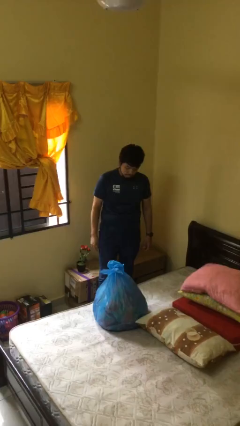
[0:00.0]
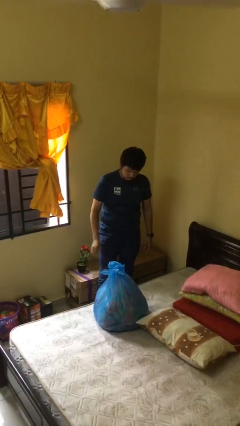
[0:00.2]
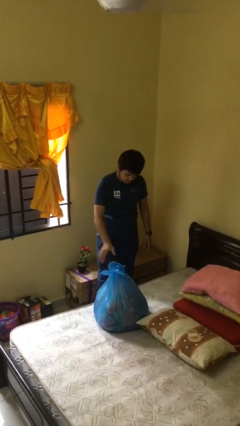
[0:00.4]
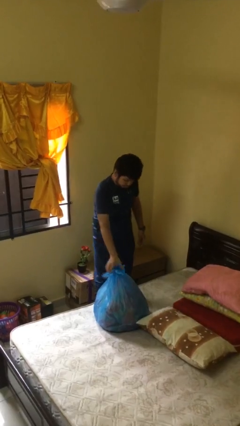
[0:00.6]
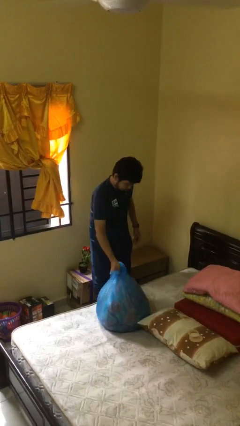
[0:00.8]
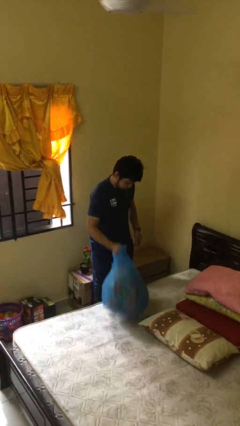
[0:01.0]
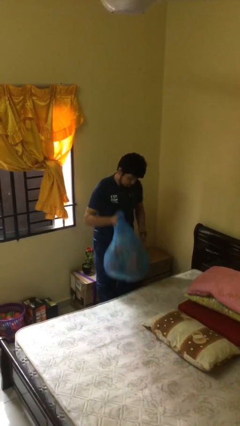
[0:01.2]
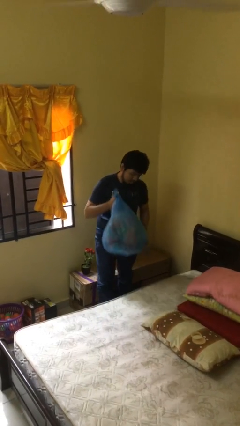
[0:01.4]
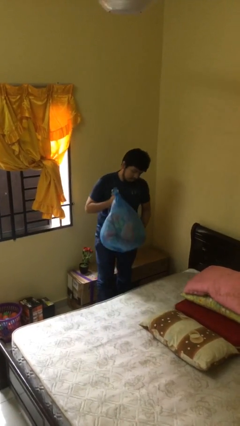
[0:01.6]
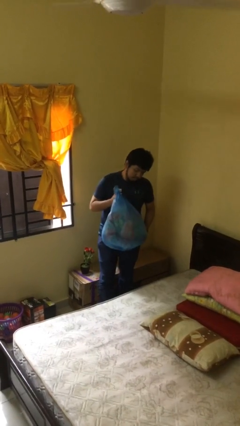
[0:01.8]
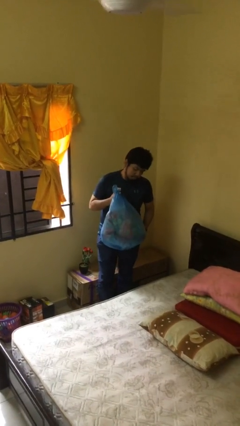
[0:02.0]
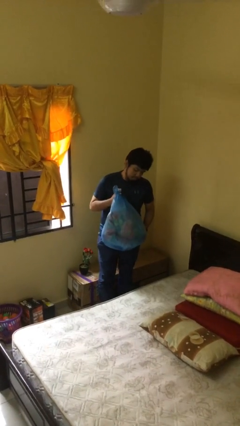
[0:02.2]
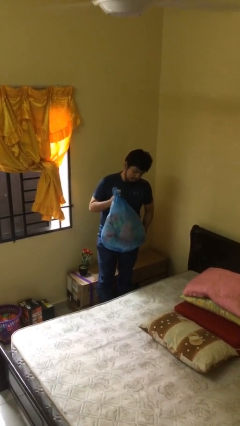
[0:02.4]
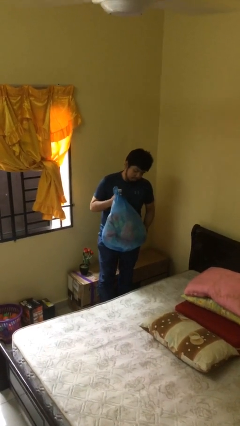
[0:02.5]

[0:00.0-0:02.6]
person picks up object from bed

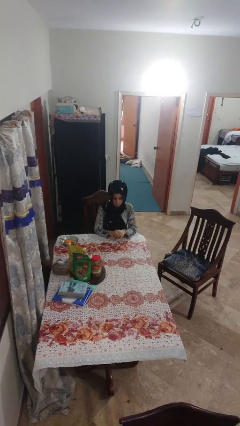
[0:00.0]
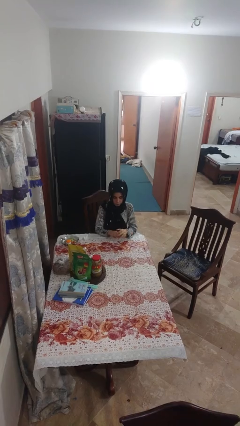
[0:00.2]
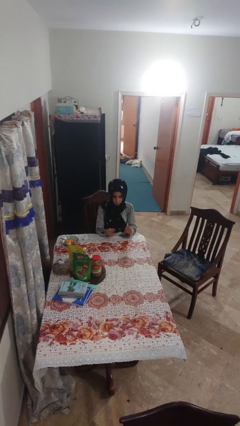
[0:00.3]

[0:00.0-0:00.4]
person claps hands

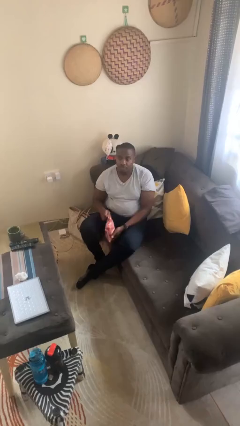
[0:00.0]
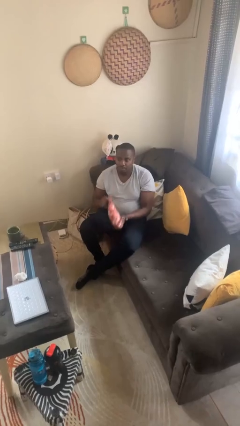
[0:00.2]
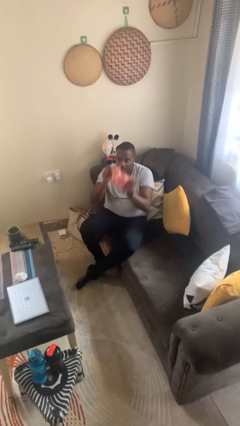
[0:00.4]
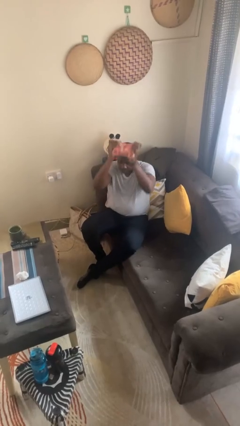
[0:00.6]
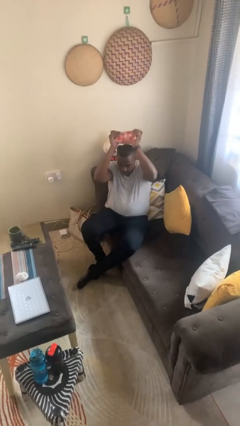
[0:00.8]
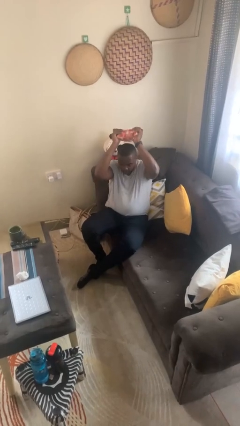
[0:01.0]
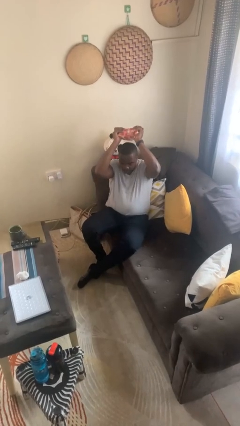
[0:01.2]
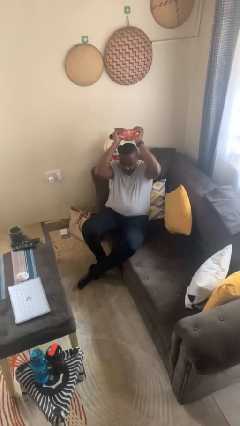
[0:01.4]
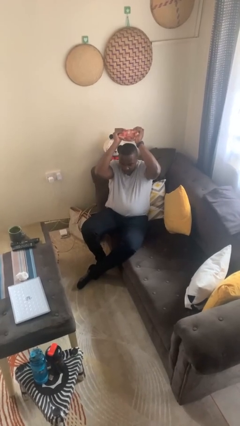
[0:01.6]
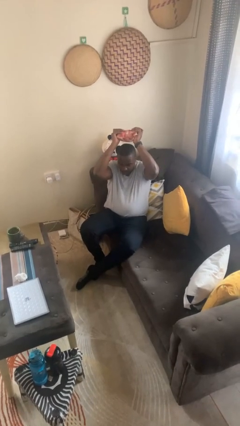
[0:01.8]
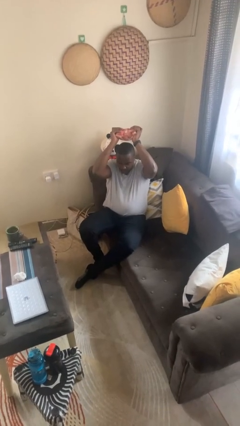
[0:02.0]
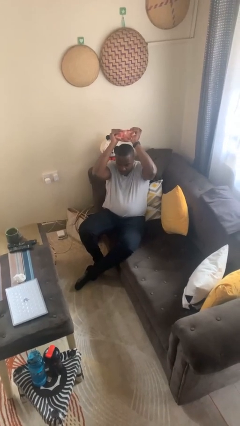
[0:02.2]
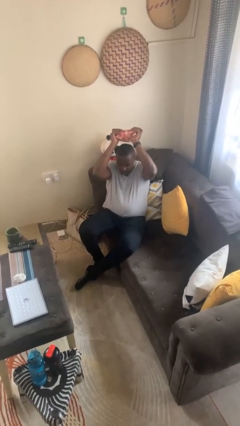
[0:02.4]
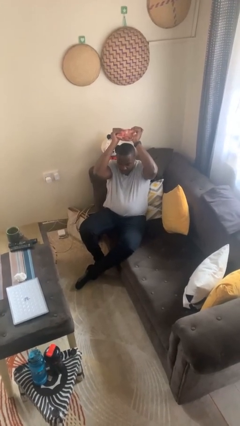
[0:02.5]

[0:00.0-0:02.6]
person holds object above head

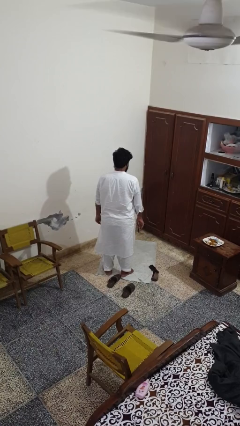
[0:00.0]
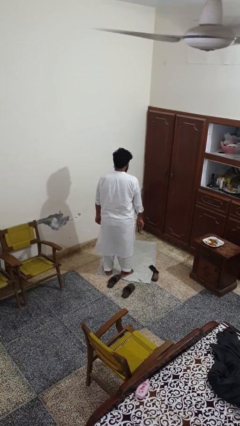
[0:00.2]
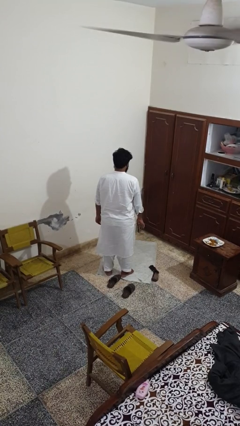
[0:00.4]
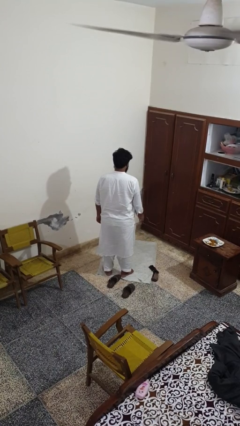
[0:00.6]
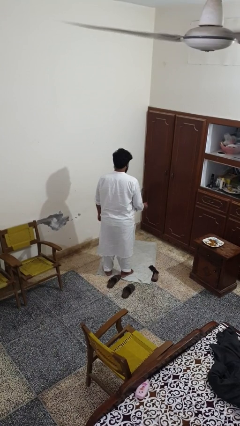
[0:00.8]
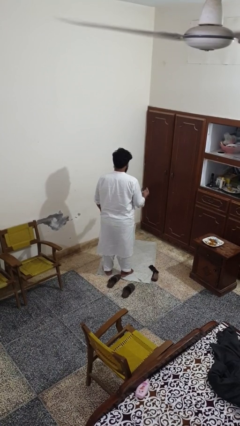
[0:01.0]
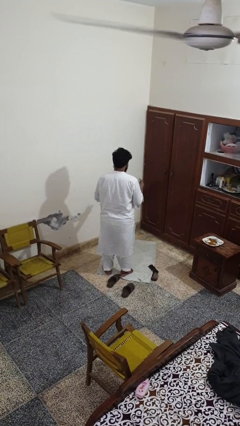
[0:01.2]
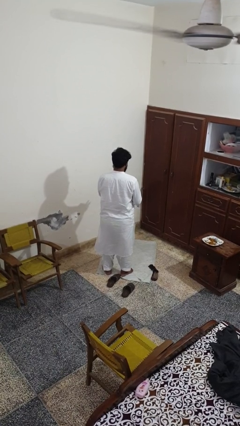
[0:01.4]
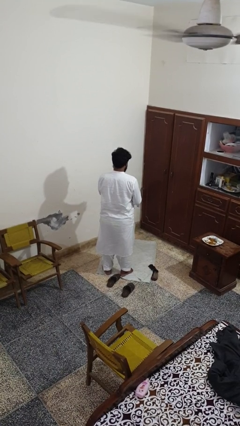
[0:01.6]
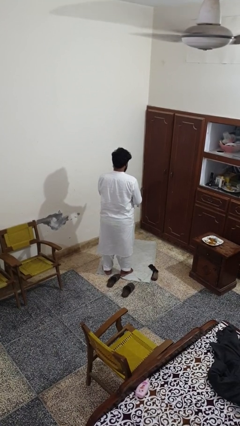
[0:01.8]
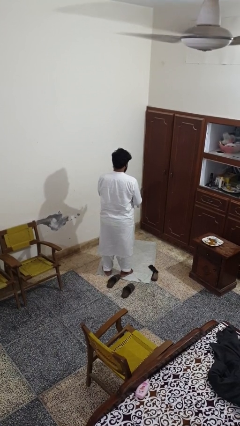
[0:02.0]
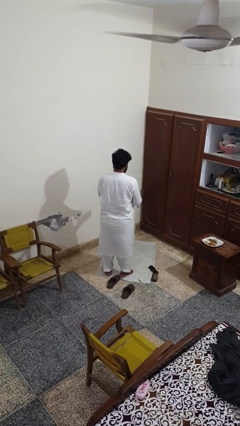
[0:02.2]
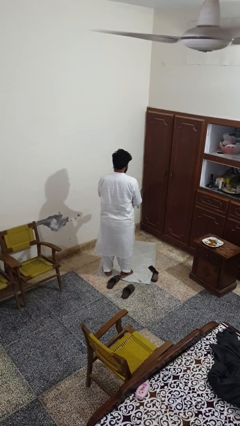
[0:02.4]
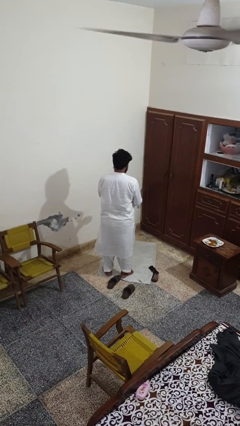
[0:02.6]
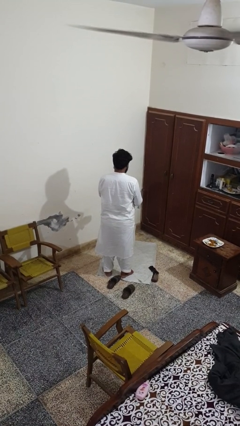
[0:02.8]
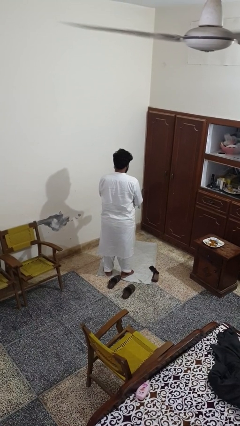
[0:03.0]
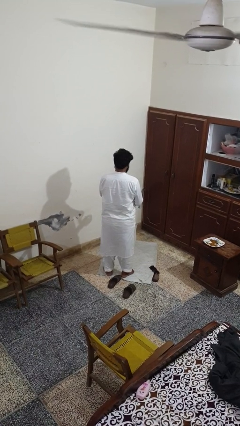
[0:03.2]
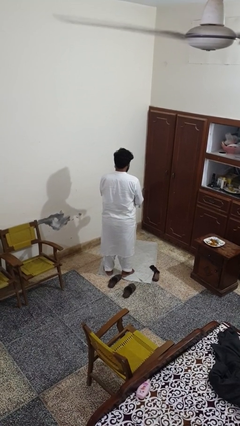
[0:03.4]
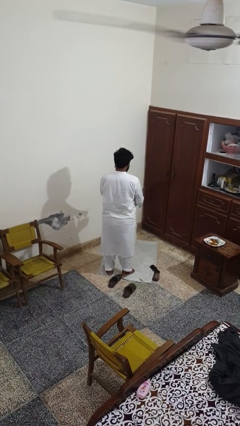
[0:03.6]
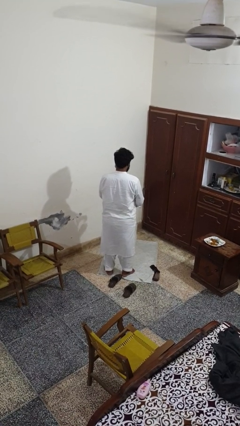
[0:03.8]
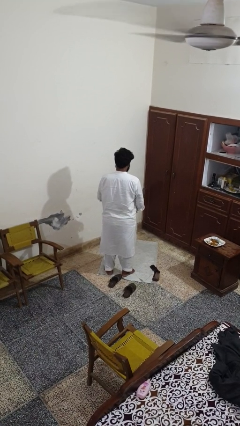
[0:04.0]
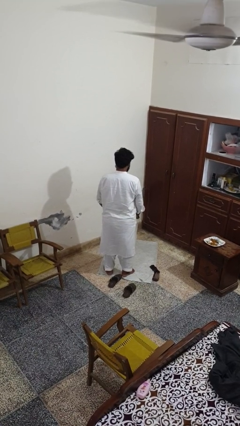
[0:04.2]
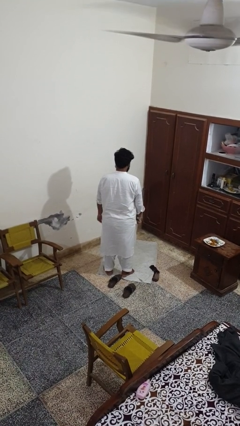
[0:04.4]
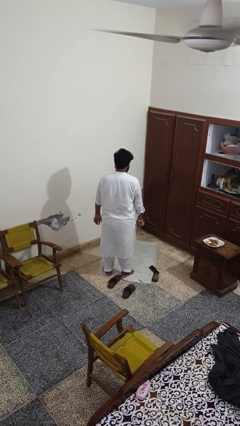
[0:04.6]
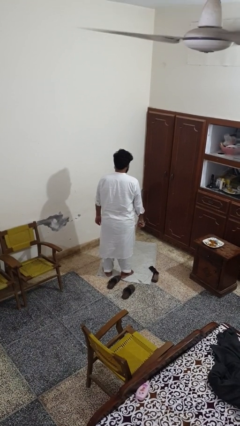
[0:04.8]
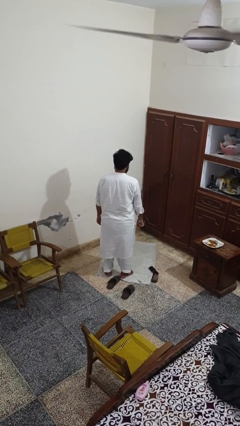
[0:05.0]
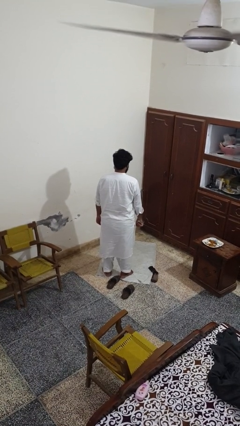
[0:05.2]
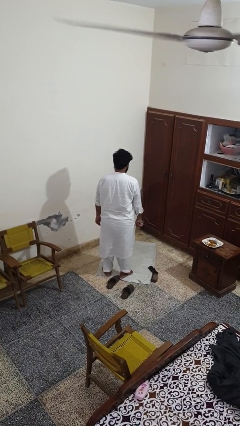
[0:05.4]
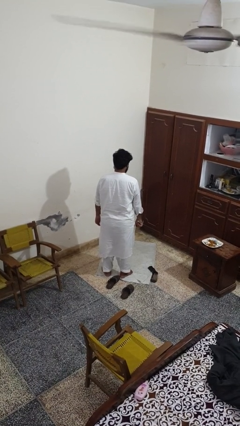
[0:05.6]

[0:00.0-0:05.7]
person puts on wristwatch

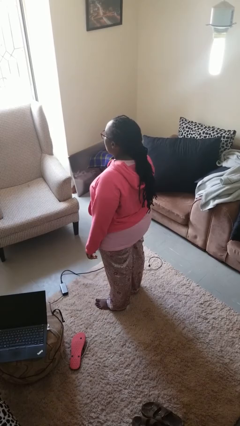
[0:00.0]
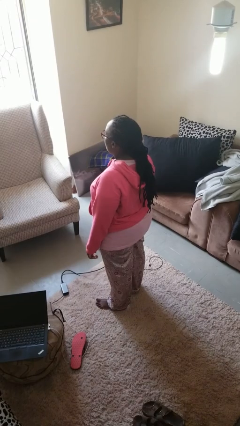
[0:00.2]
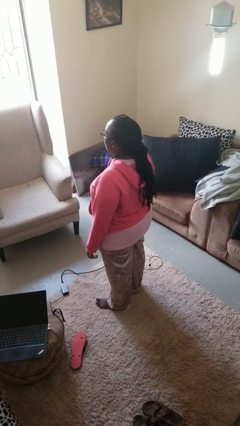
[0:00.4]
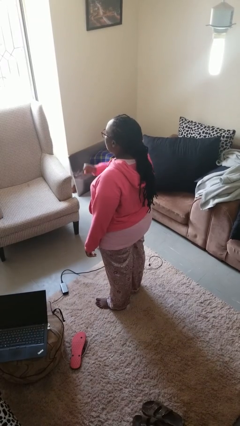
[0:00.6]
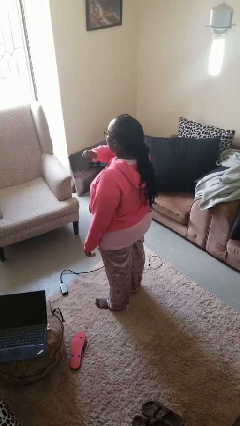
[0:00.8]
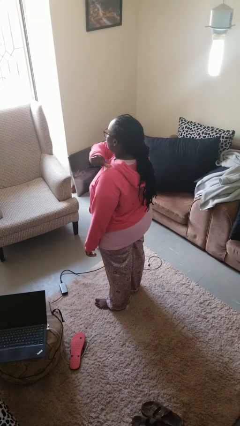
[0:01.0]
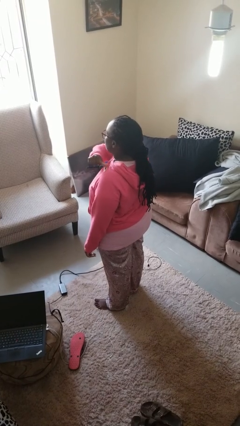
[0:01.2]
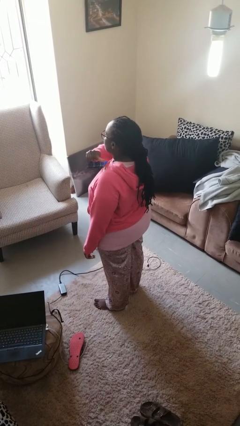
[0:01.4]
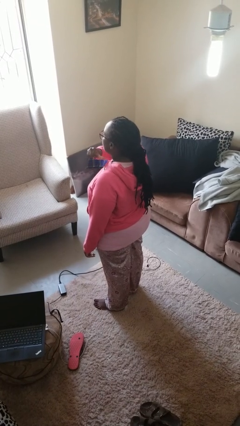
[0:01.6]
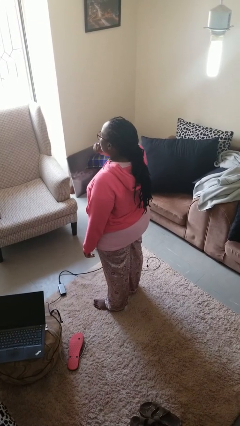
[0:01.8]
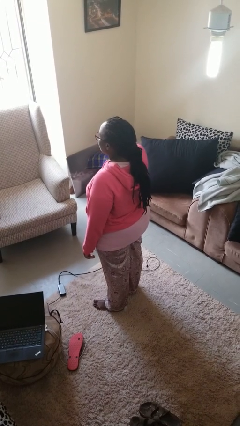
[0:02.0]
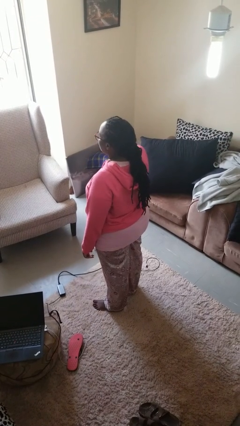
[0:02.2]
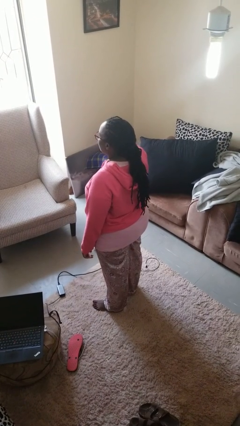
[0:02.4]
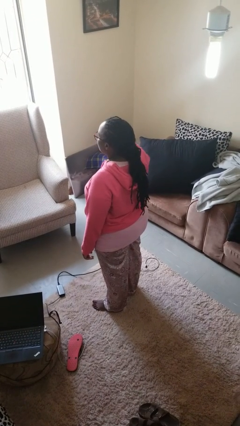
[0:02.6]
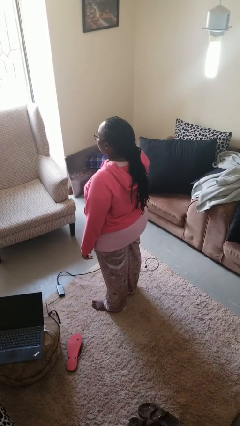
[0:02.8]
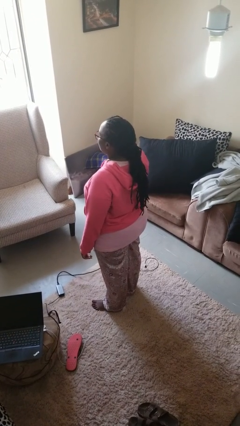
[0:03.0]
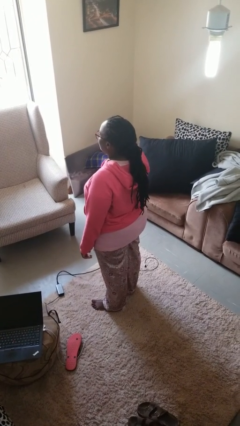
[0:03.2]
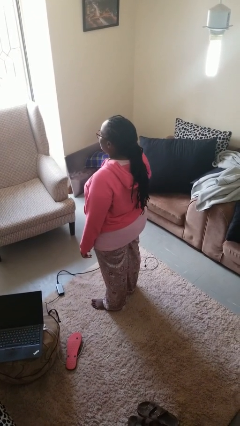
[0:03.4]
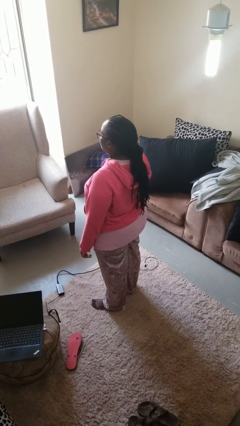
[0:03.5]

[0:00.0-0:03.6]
person gestures cut

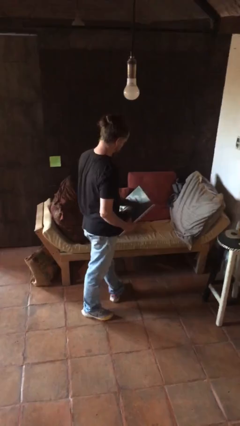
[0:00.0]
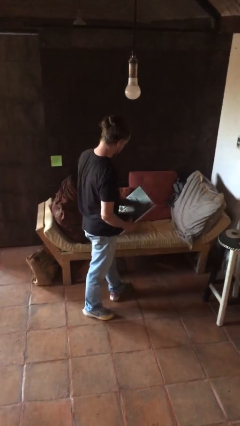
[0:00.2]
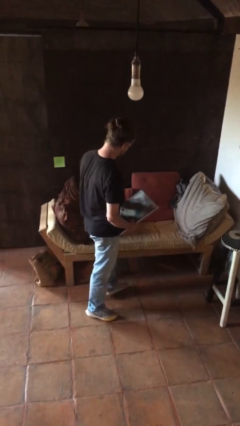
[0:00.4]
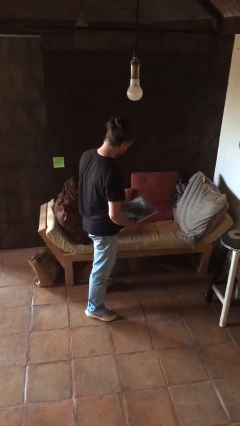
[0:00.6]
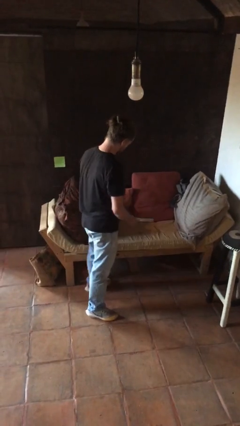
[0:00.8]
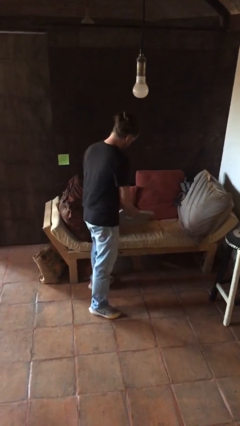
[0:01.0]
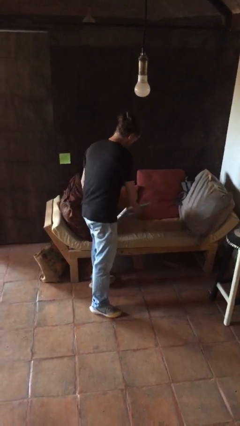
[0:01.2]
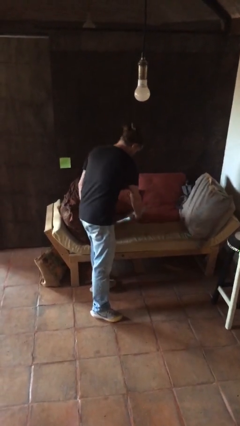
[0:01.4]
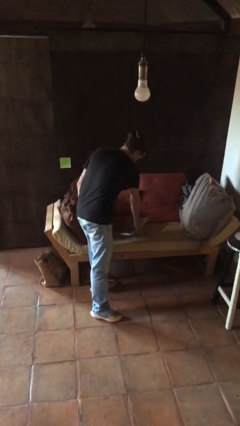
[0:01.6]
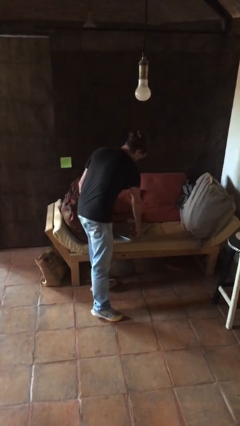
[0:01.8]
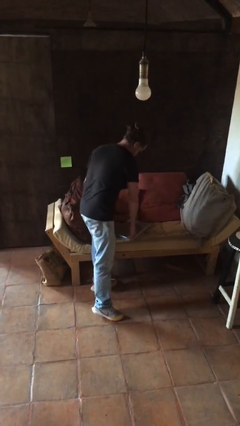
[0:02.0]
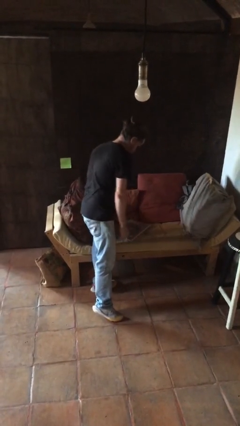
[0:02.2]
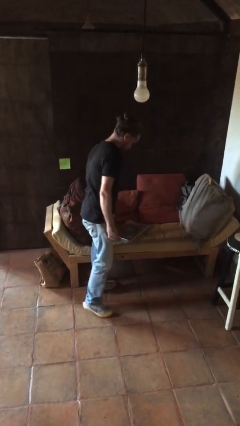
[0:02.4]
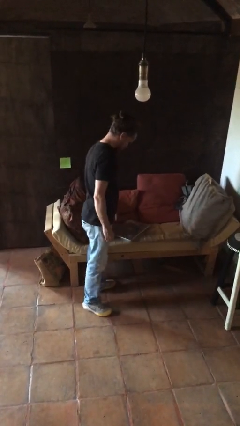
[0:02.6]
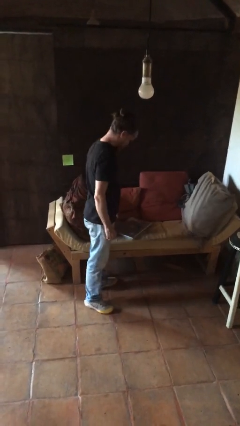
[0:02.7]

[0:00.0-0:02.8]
person puts down object on couch
